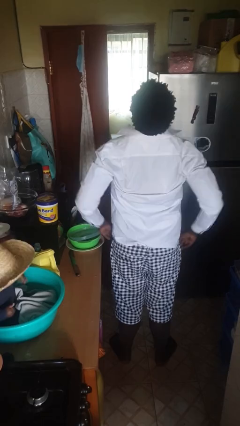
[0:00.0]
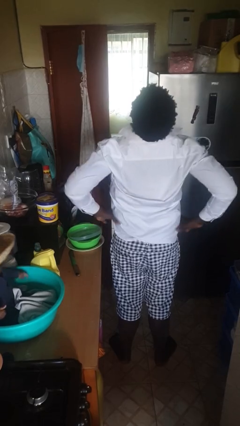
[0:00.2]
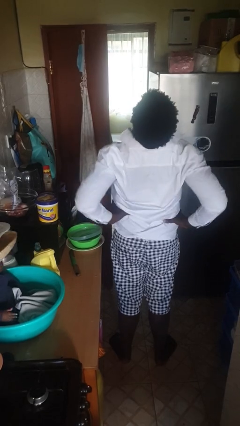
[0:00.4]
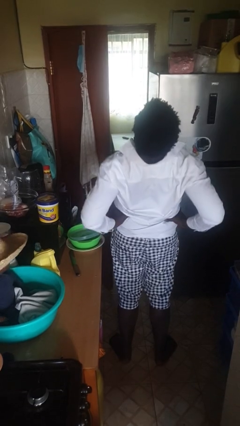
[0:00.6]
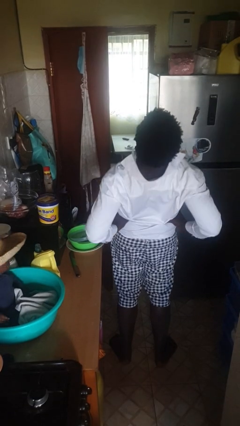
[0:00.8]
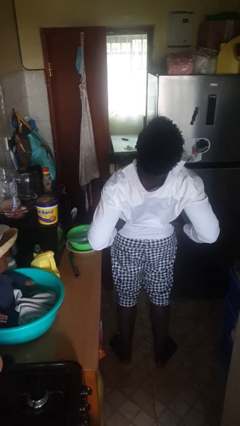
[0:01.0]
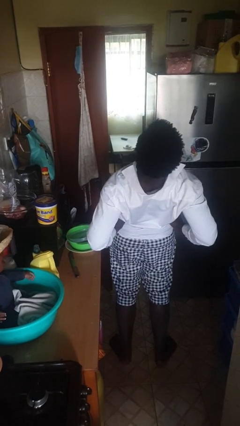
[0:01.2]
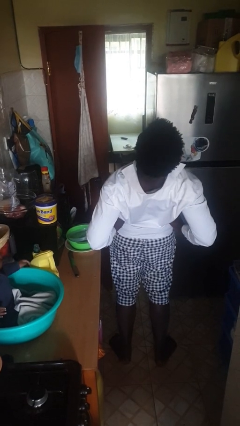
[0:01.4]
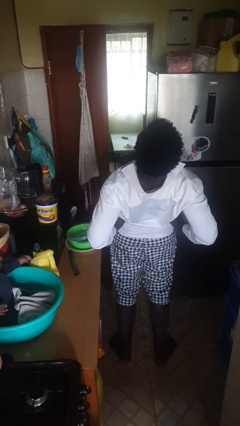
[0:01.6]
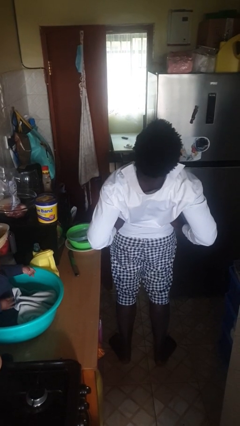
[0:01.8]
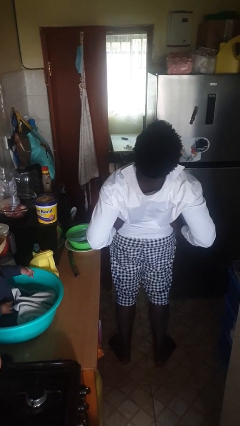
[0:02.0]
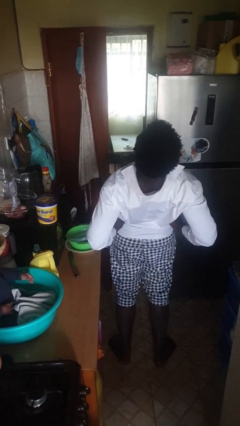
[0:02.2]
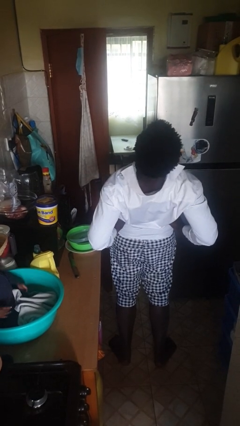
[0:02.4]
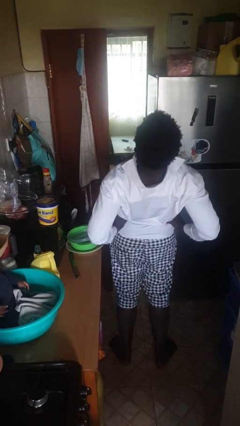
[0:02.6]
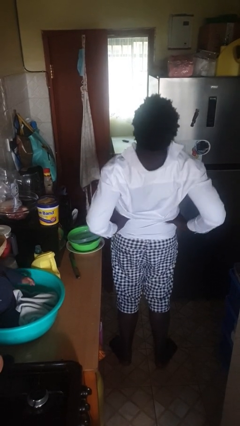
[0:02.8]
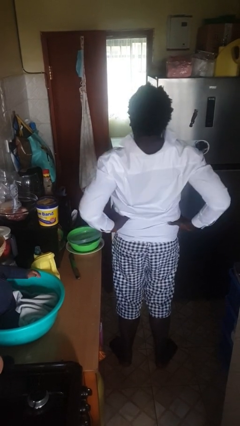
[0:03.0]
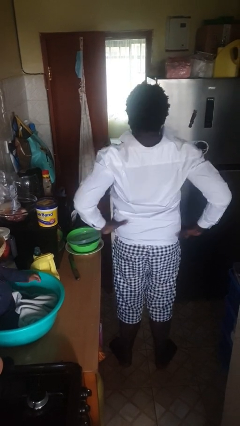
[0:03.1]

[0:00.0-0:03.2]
person stretches back

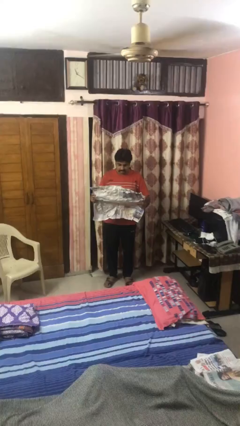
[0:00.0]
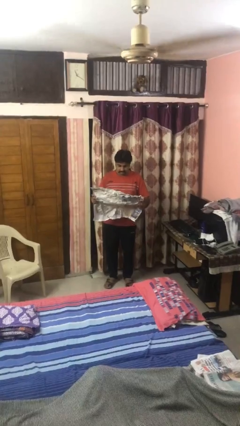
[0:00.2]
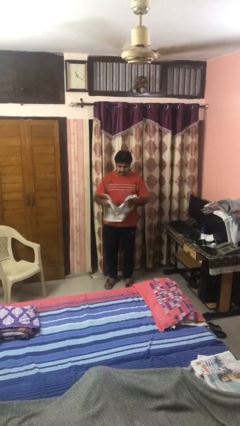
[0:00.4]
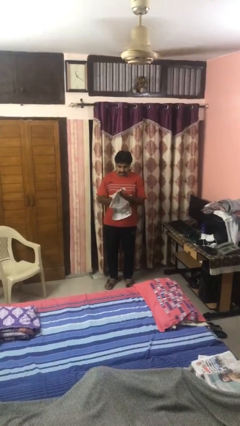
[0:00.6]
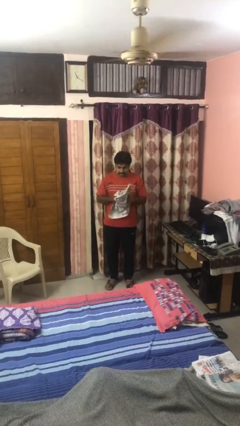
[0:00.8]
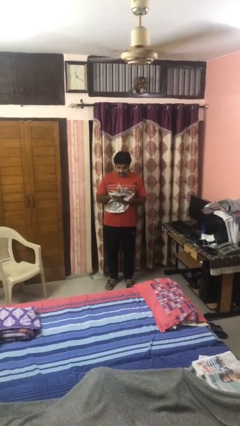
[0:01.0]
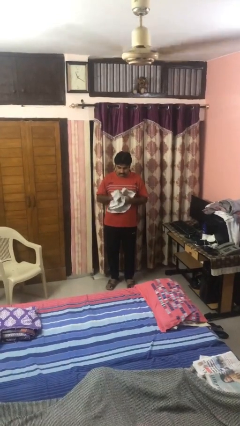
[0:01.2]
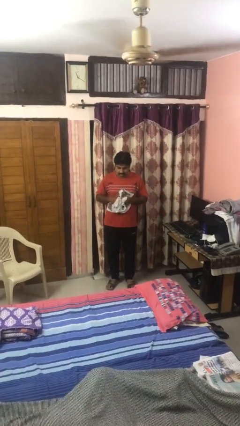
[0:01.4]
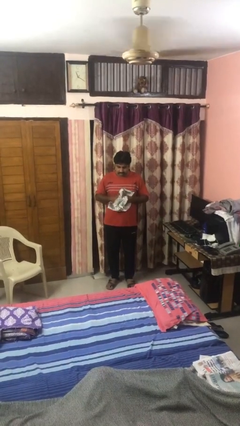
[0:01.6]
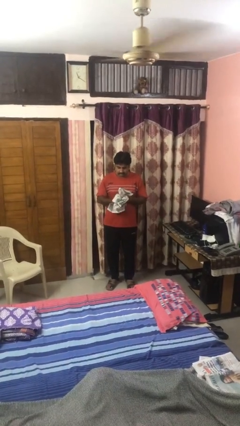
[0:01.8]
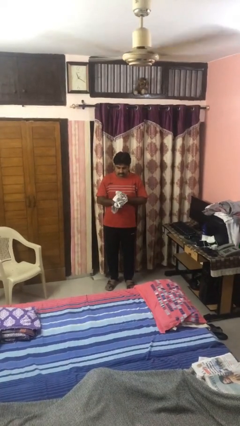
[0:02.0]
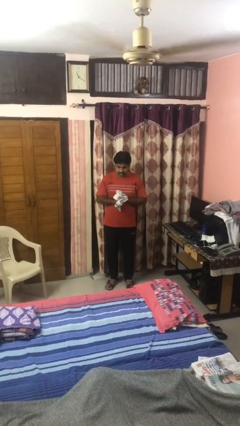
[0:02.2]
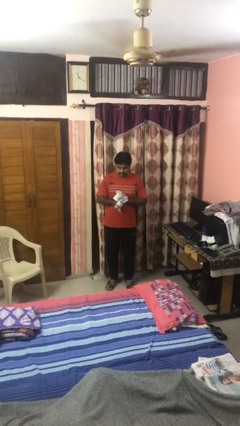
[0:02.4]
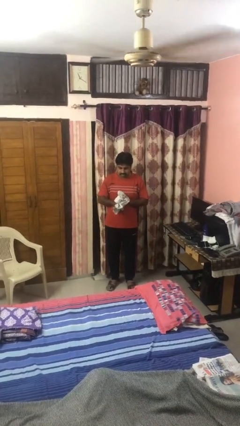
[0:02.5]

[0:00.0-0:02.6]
person crumples paper

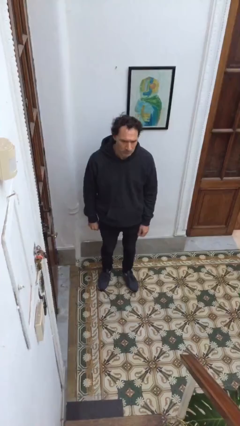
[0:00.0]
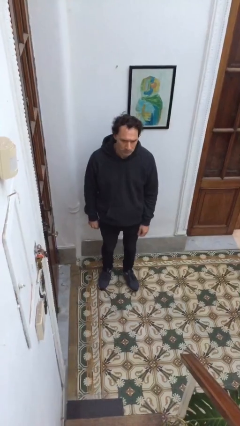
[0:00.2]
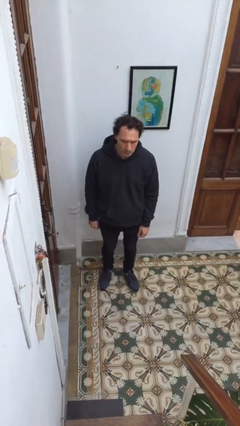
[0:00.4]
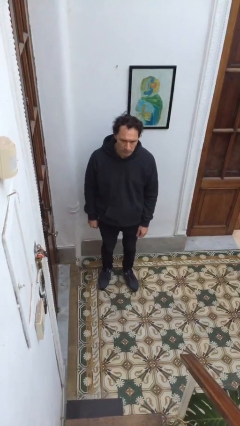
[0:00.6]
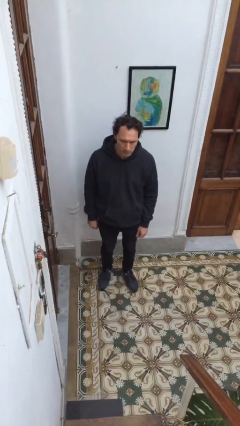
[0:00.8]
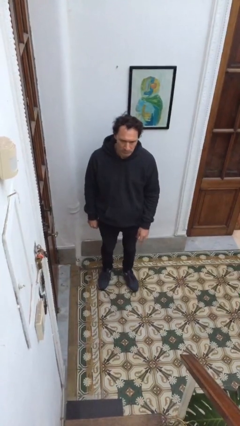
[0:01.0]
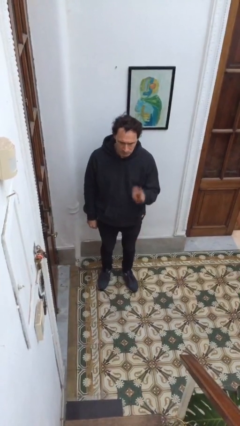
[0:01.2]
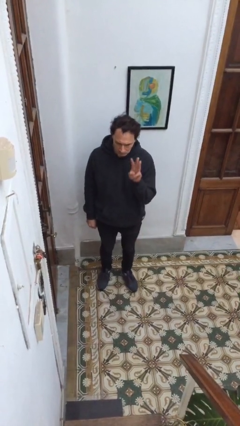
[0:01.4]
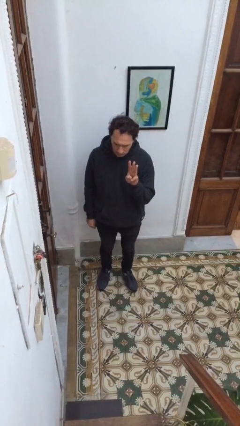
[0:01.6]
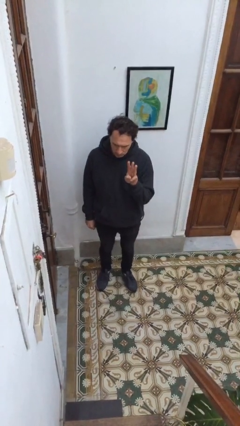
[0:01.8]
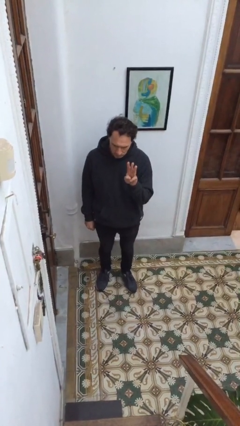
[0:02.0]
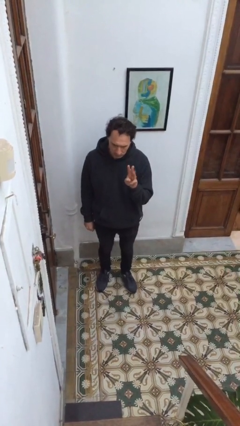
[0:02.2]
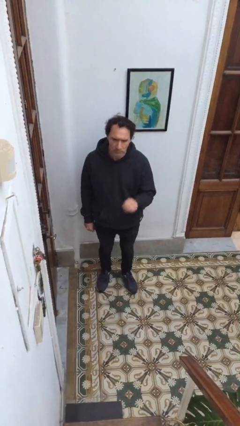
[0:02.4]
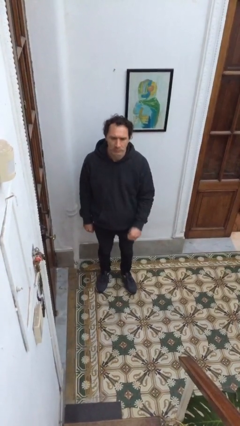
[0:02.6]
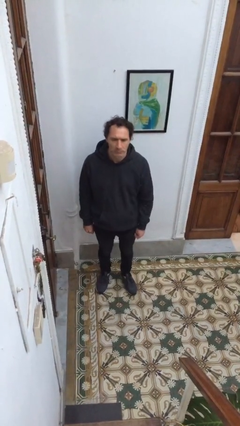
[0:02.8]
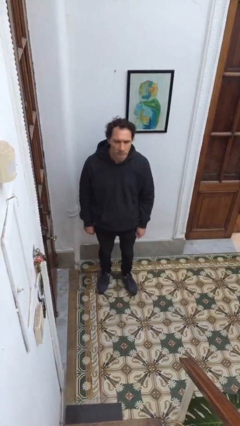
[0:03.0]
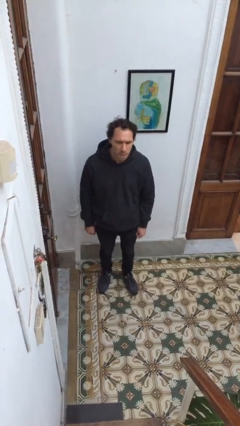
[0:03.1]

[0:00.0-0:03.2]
person gestures number three

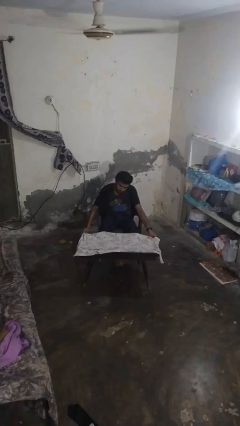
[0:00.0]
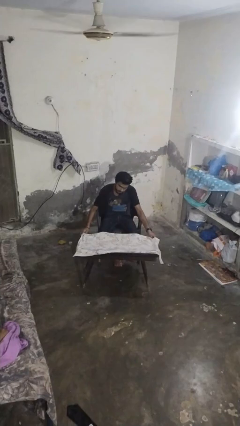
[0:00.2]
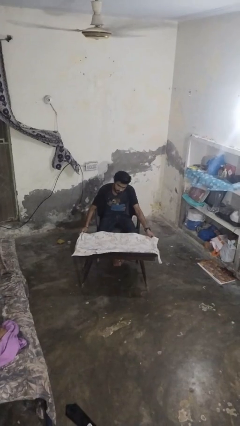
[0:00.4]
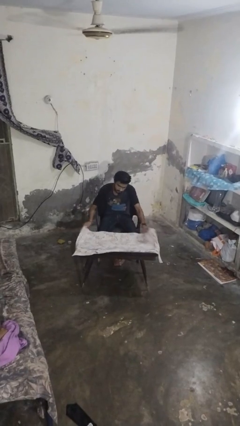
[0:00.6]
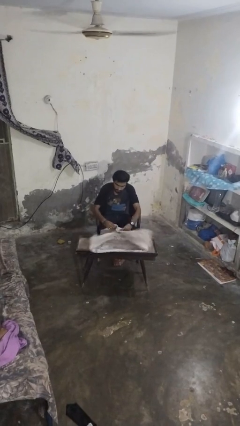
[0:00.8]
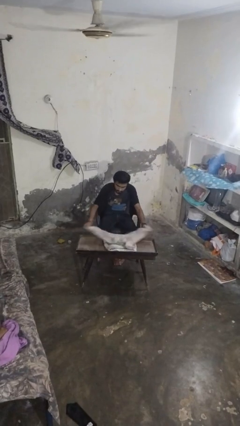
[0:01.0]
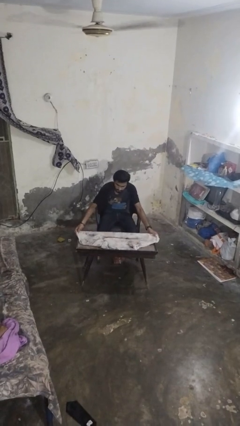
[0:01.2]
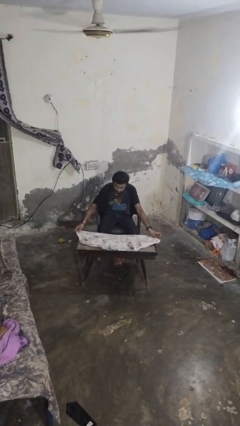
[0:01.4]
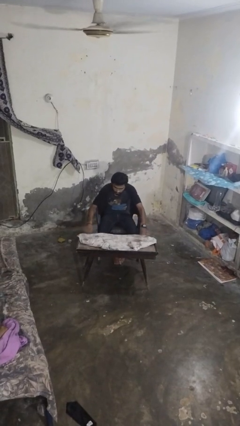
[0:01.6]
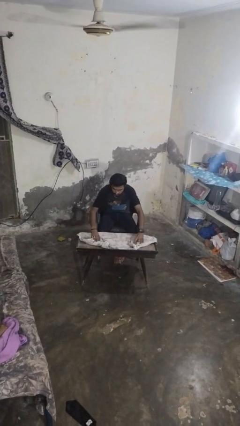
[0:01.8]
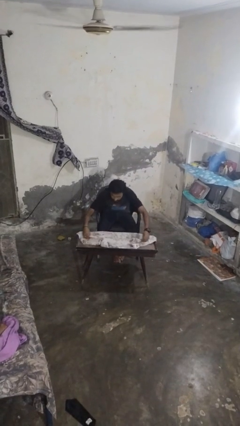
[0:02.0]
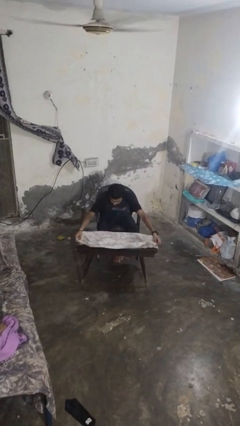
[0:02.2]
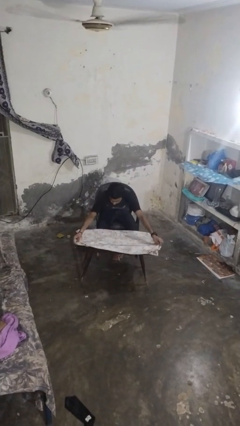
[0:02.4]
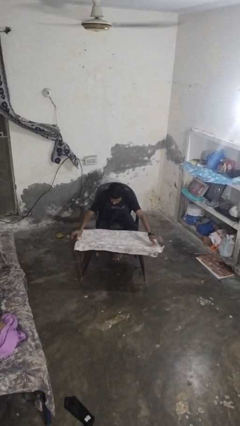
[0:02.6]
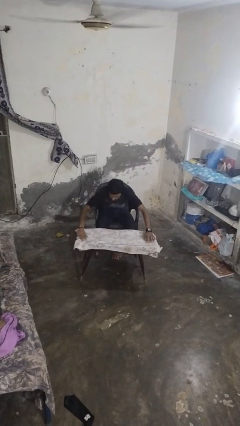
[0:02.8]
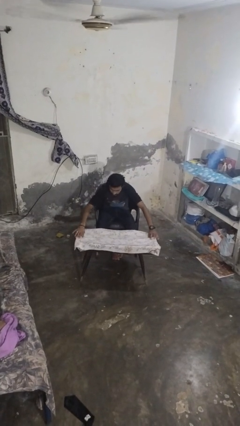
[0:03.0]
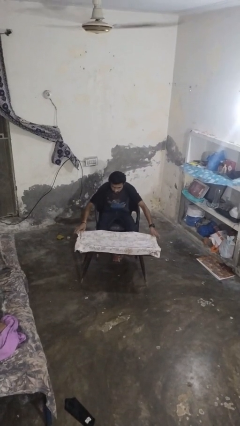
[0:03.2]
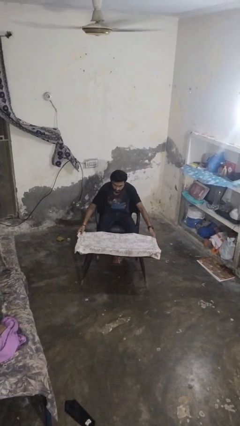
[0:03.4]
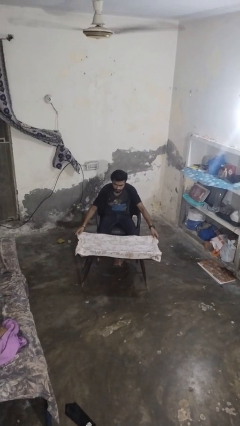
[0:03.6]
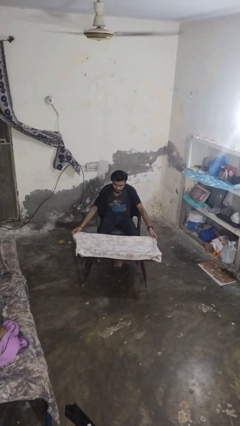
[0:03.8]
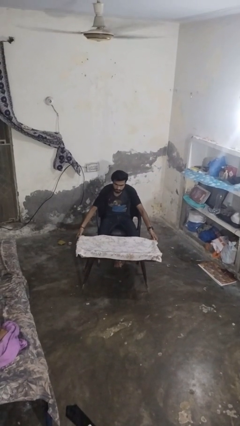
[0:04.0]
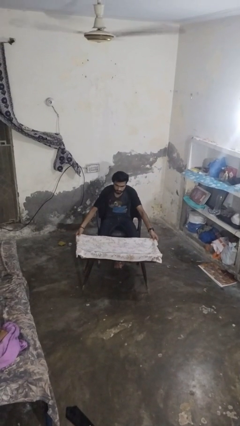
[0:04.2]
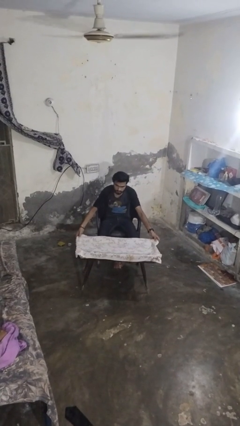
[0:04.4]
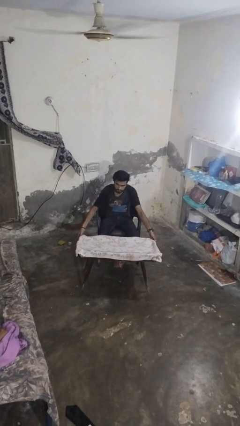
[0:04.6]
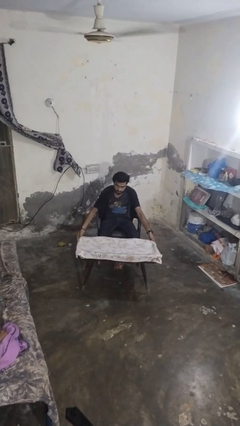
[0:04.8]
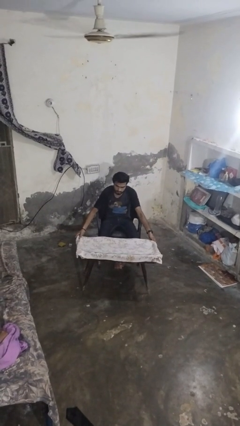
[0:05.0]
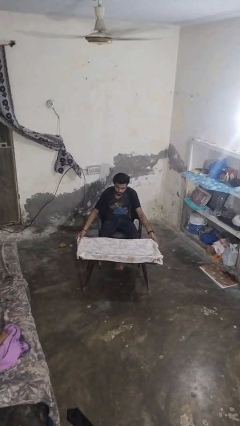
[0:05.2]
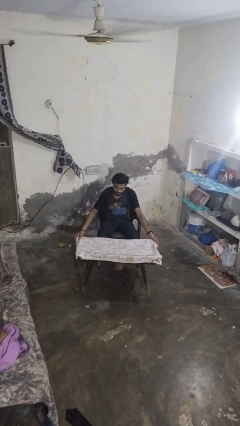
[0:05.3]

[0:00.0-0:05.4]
person spreads tablecloth

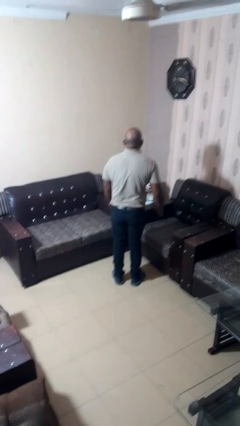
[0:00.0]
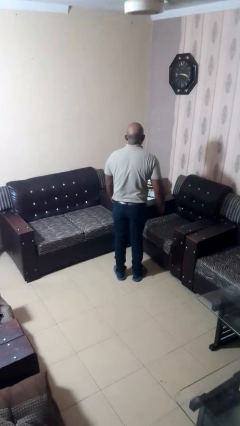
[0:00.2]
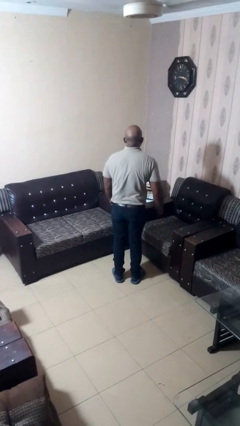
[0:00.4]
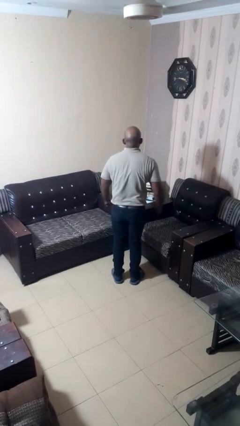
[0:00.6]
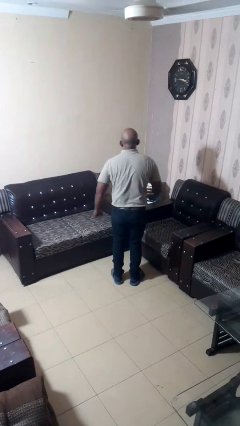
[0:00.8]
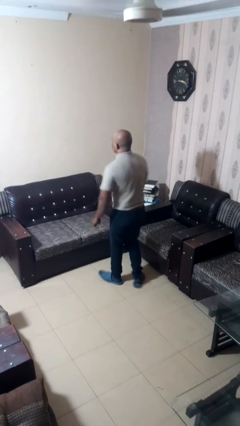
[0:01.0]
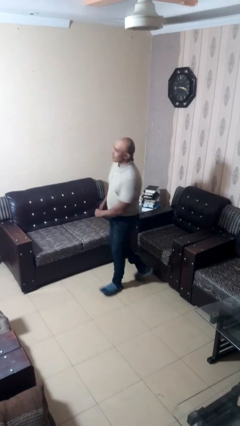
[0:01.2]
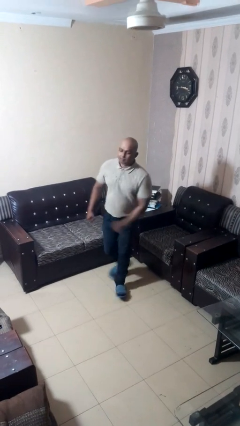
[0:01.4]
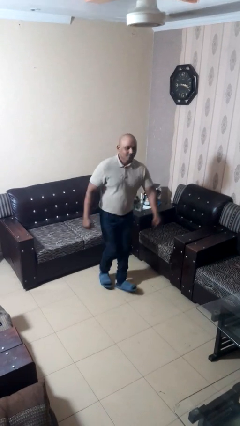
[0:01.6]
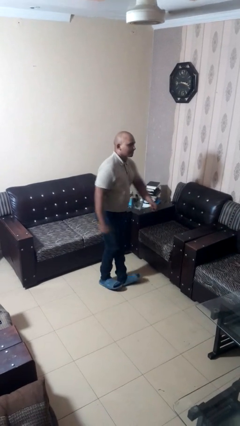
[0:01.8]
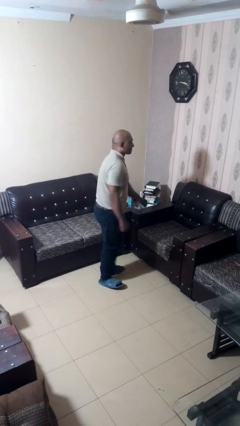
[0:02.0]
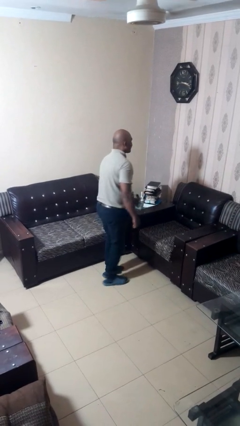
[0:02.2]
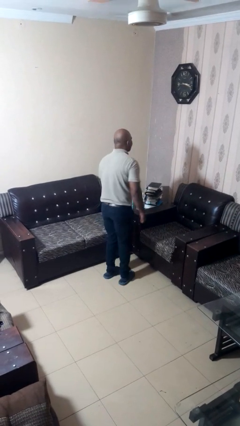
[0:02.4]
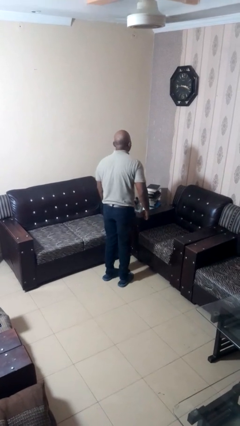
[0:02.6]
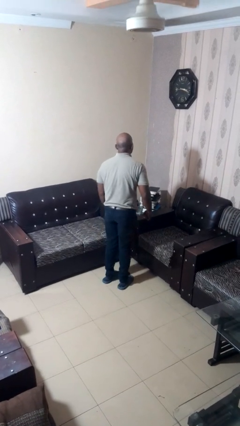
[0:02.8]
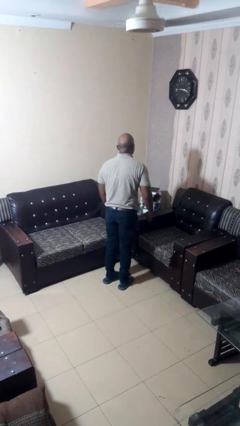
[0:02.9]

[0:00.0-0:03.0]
person twirls
